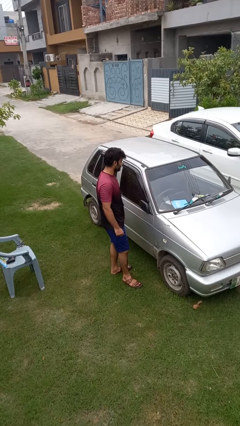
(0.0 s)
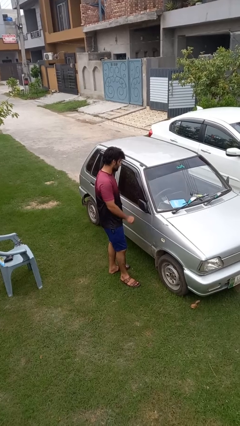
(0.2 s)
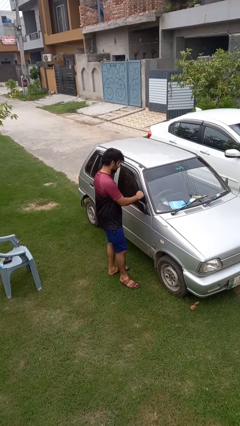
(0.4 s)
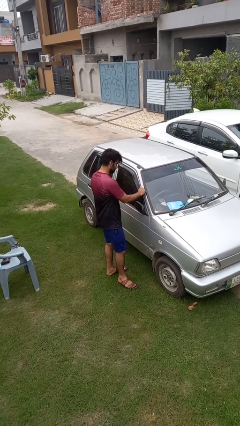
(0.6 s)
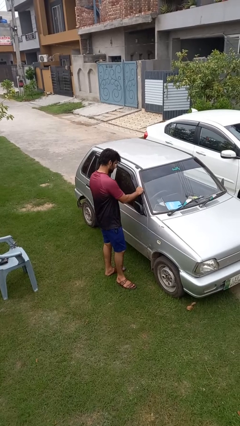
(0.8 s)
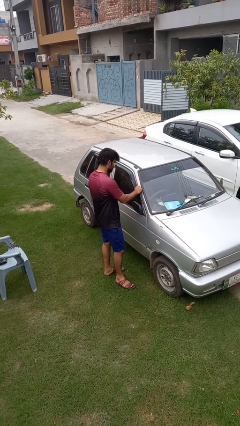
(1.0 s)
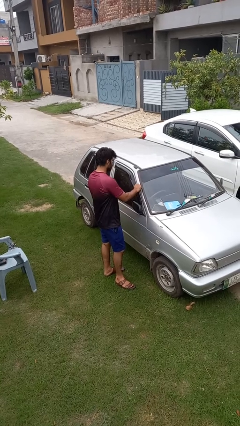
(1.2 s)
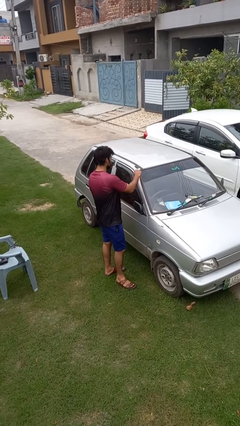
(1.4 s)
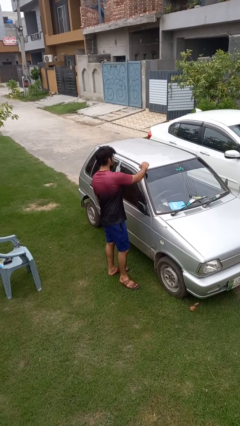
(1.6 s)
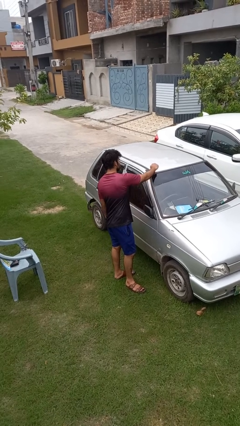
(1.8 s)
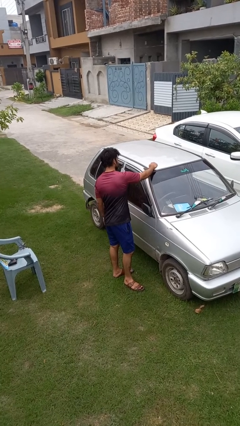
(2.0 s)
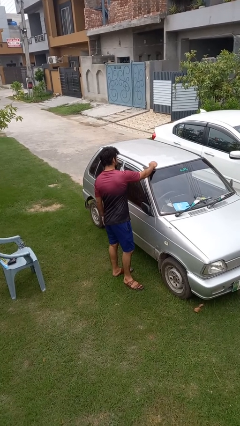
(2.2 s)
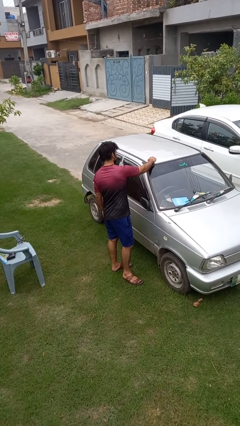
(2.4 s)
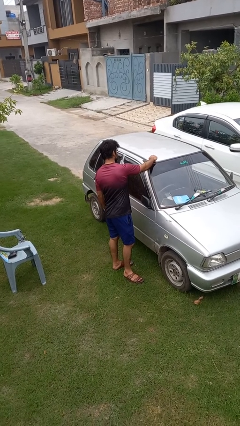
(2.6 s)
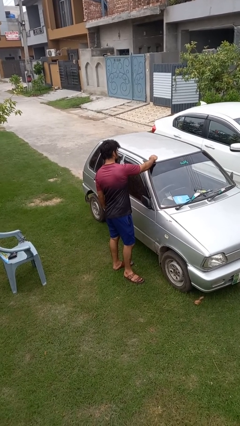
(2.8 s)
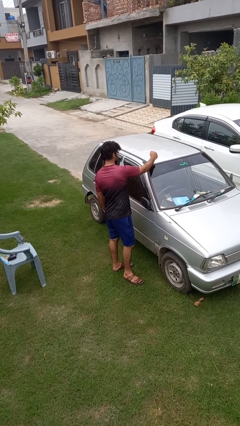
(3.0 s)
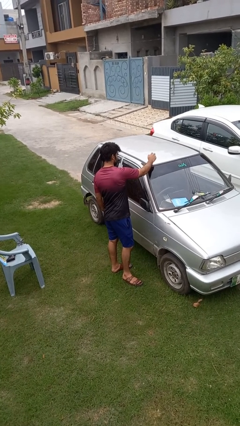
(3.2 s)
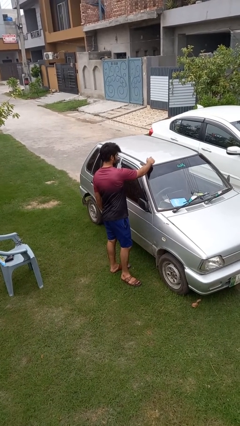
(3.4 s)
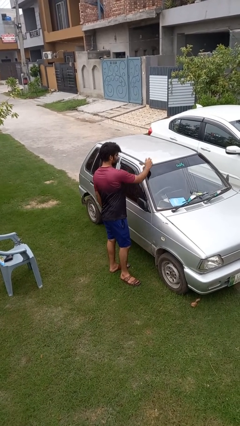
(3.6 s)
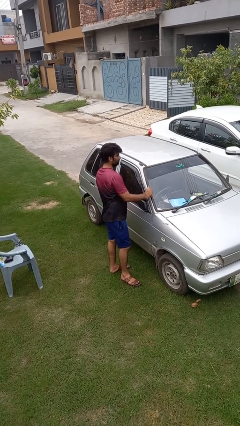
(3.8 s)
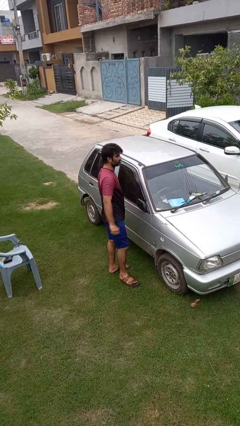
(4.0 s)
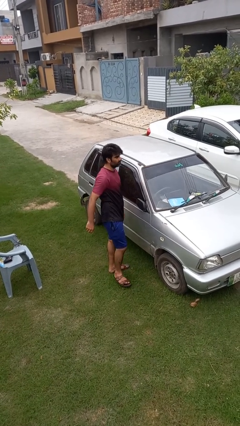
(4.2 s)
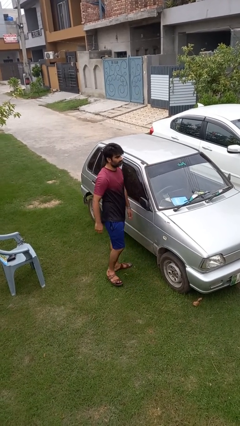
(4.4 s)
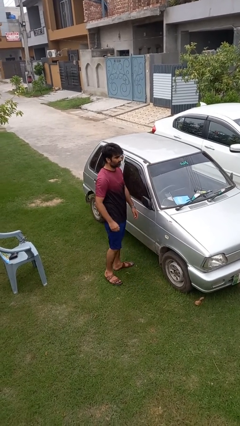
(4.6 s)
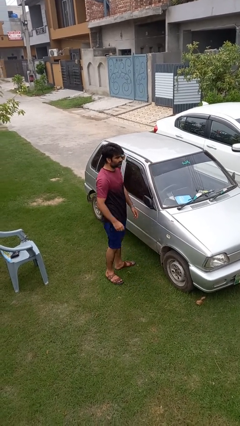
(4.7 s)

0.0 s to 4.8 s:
person taps object with finger

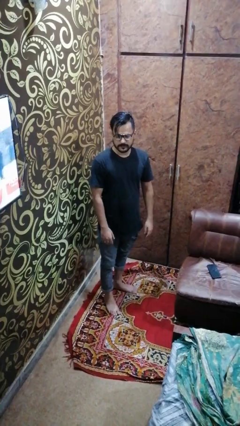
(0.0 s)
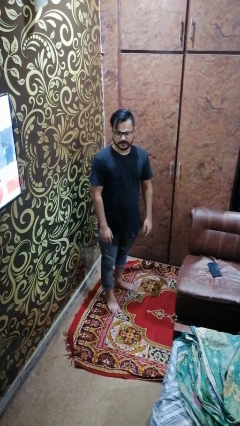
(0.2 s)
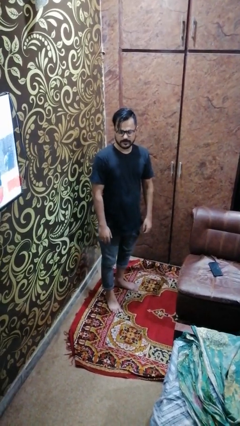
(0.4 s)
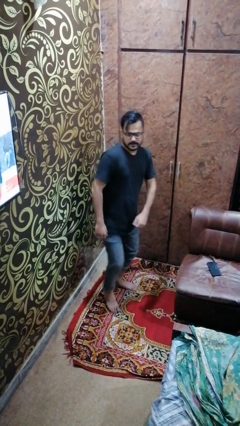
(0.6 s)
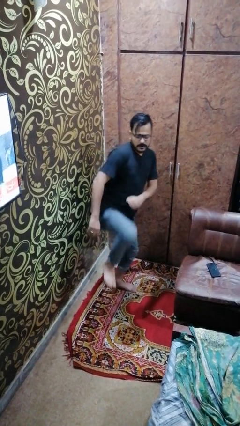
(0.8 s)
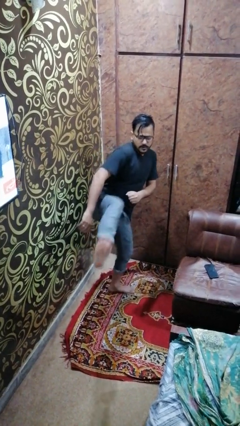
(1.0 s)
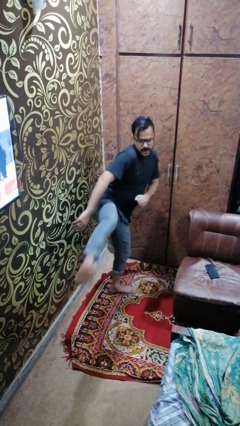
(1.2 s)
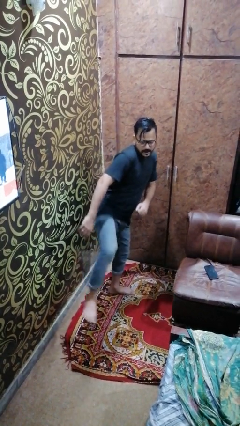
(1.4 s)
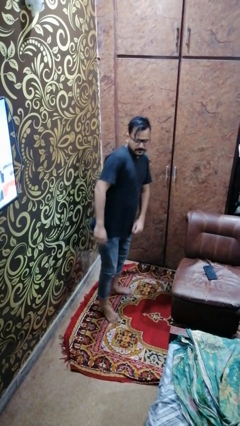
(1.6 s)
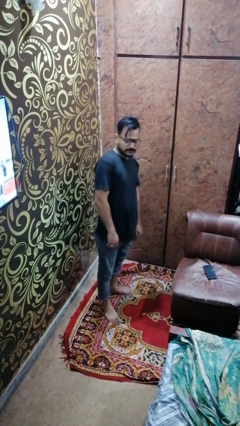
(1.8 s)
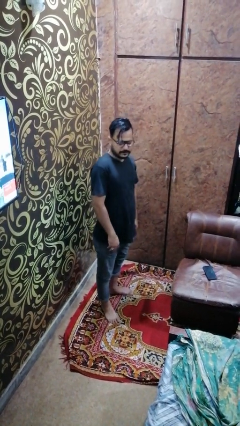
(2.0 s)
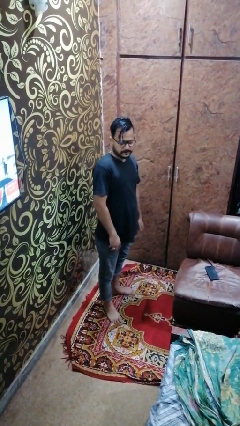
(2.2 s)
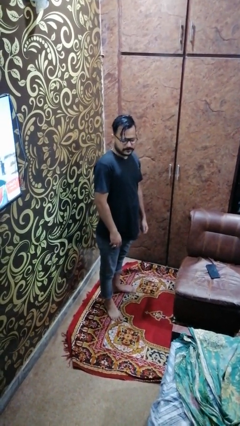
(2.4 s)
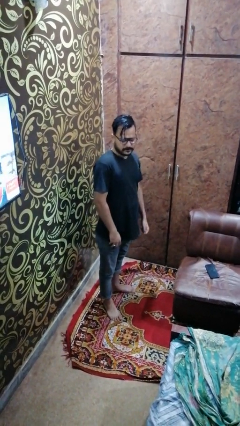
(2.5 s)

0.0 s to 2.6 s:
person karate kicks

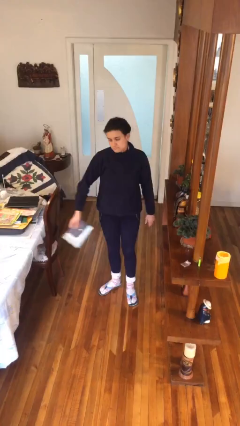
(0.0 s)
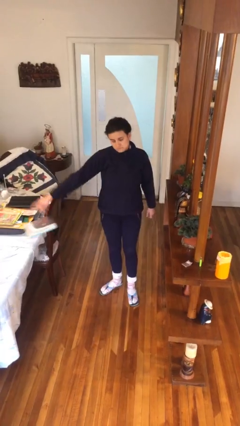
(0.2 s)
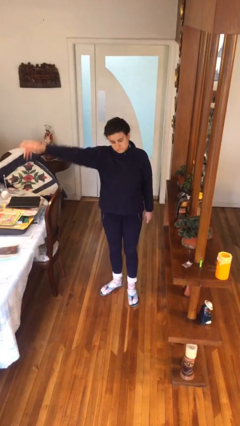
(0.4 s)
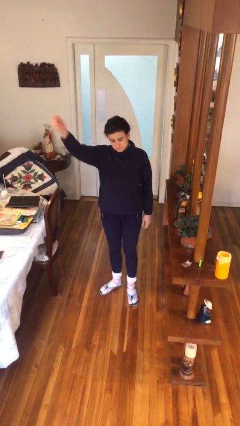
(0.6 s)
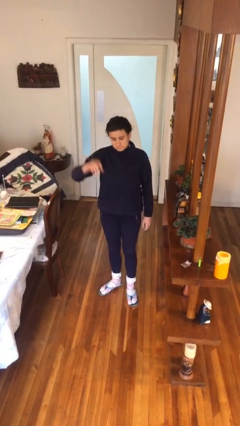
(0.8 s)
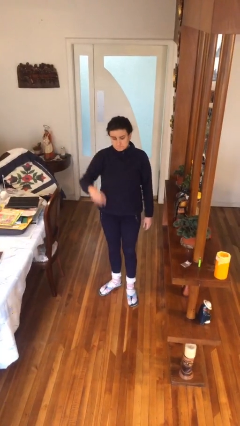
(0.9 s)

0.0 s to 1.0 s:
person throws object on table

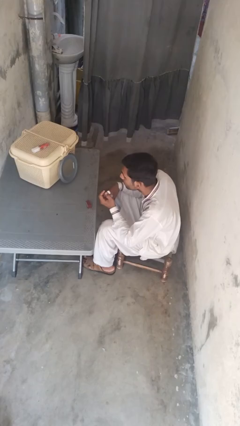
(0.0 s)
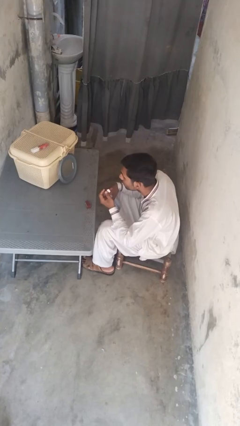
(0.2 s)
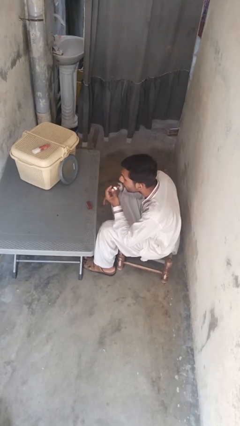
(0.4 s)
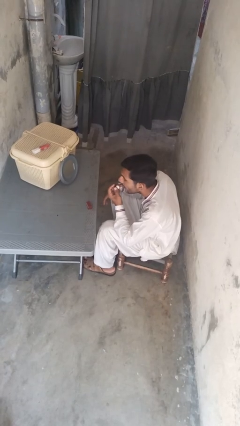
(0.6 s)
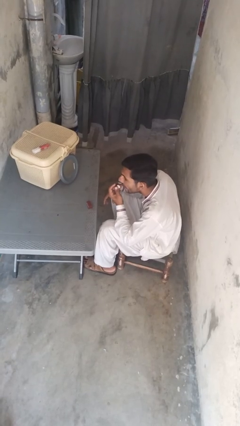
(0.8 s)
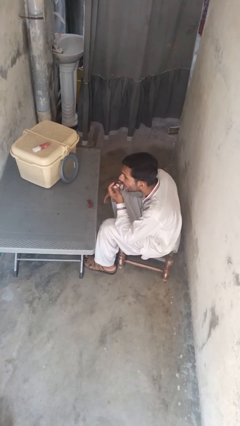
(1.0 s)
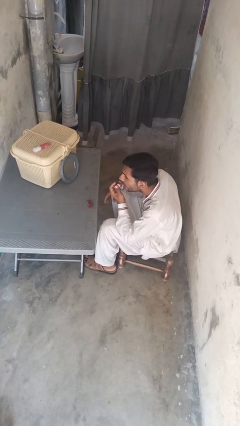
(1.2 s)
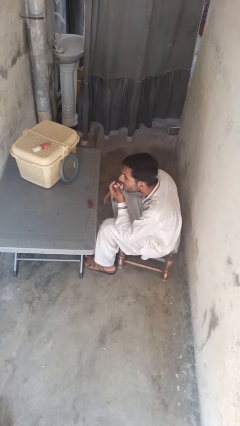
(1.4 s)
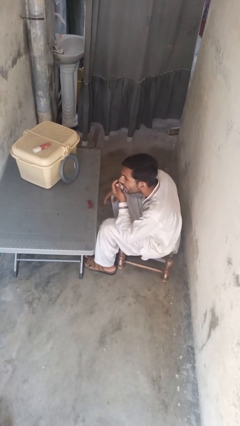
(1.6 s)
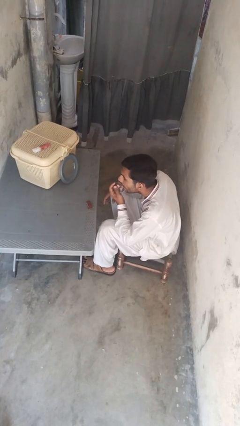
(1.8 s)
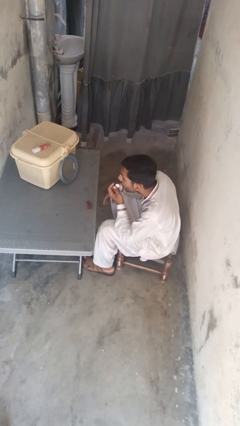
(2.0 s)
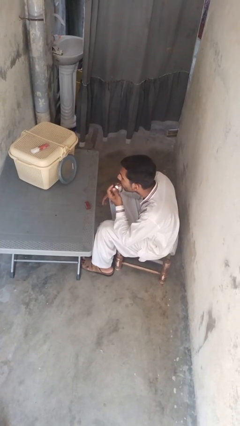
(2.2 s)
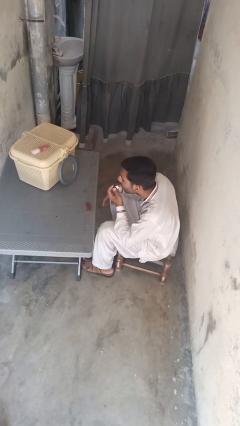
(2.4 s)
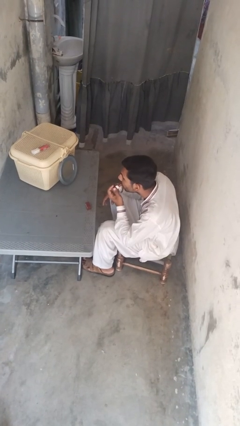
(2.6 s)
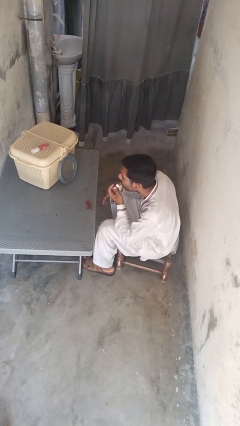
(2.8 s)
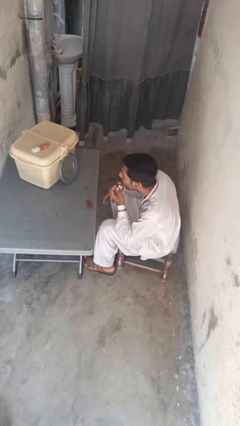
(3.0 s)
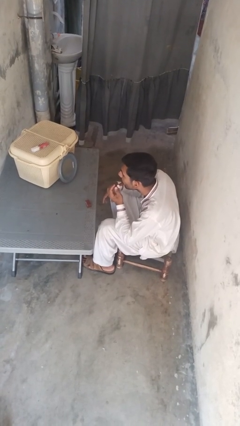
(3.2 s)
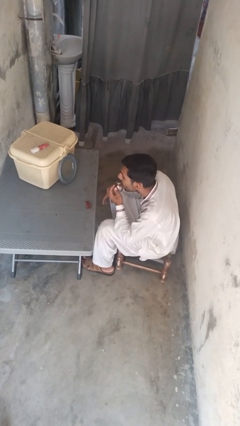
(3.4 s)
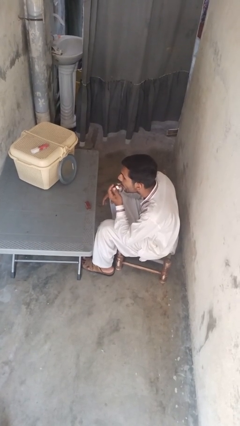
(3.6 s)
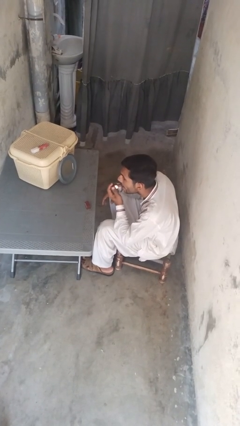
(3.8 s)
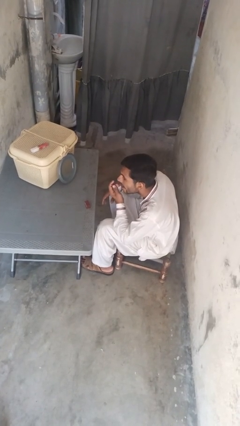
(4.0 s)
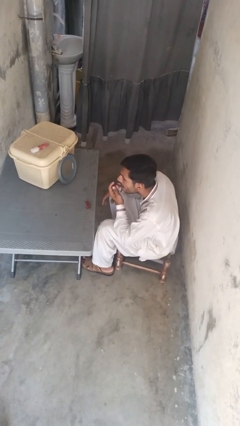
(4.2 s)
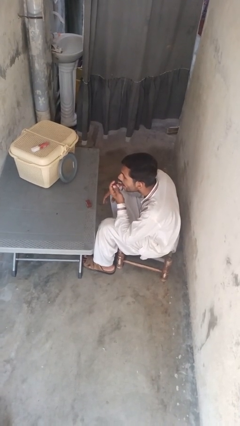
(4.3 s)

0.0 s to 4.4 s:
person applies lip makeup

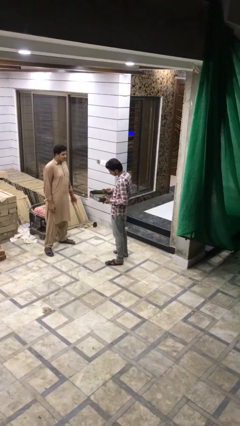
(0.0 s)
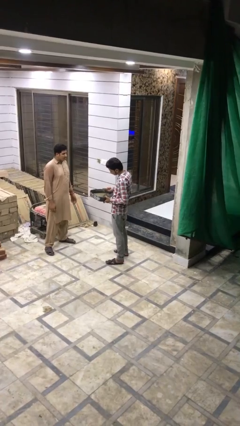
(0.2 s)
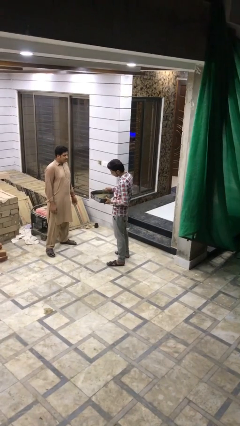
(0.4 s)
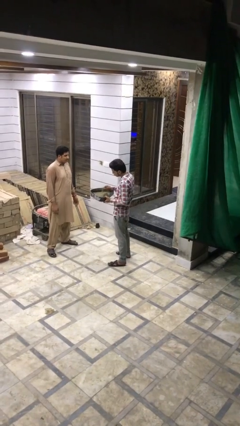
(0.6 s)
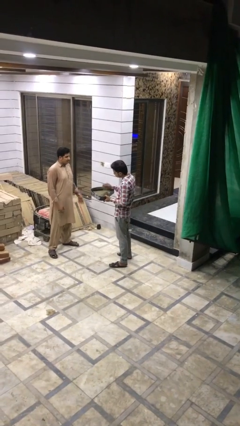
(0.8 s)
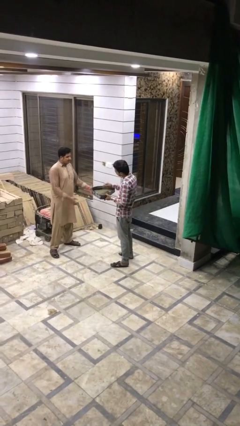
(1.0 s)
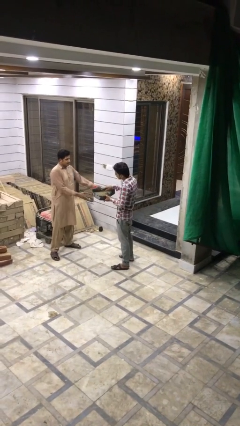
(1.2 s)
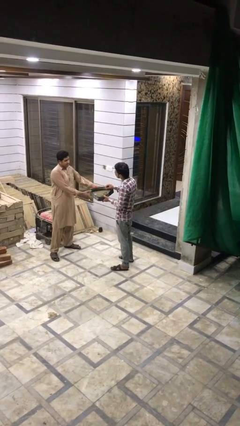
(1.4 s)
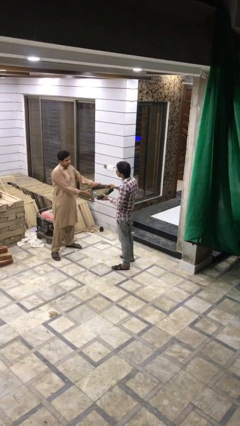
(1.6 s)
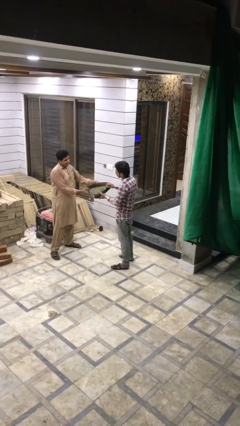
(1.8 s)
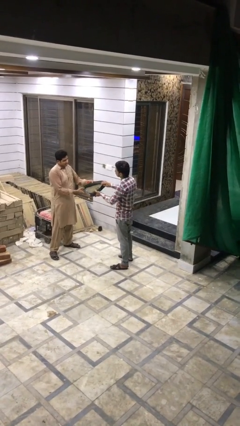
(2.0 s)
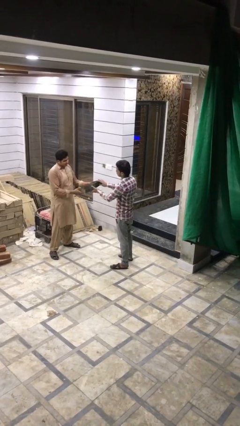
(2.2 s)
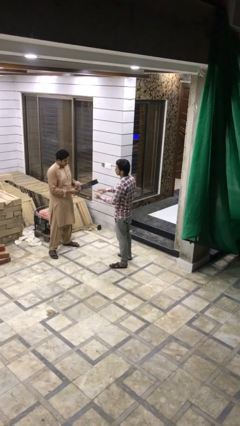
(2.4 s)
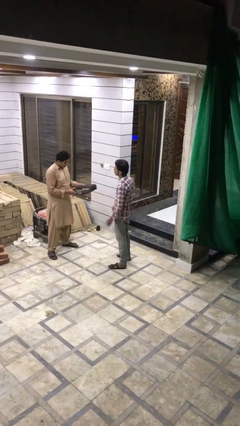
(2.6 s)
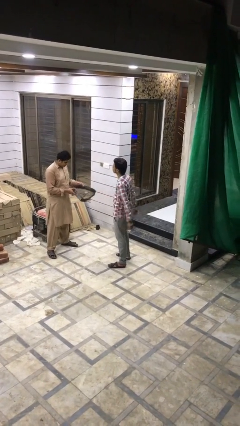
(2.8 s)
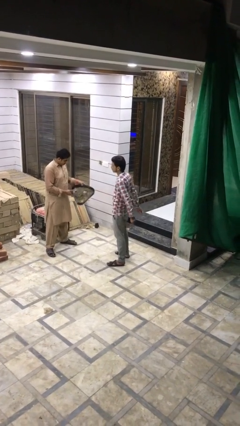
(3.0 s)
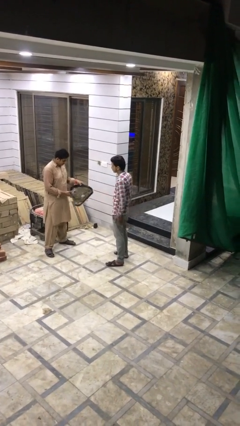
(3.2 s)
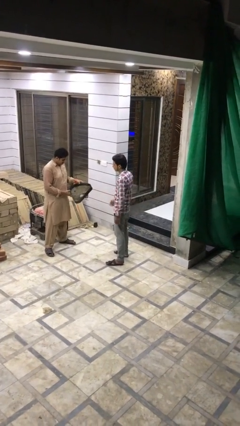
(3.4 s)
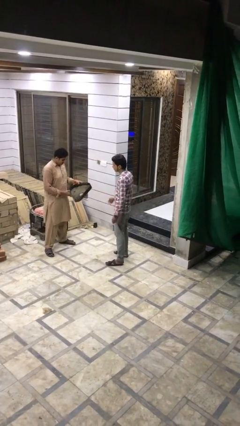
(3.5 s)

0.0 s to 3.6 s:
person transfers object to person

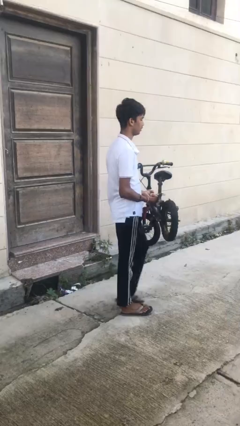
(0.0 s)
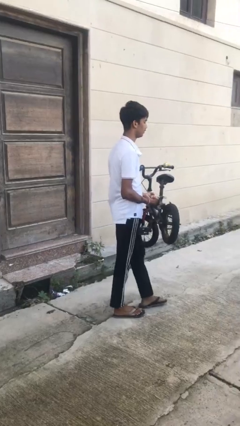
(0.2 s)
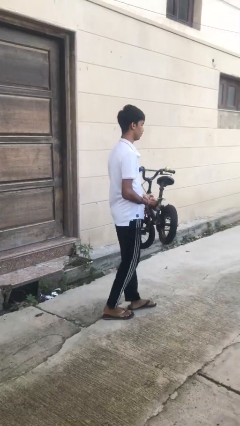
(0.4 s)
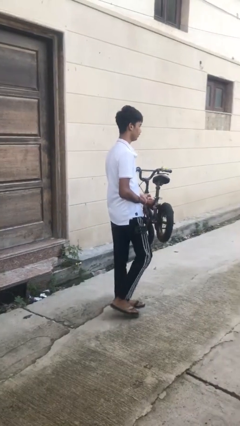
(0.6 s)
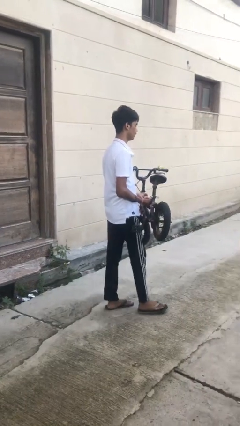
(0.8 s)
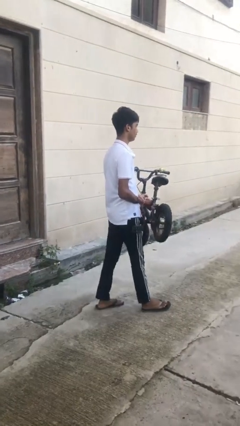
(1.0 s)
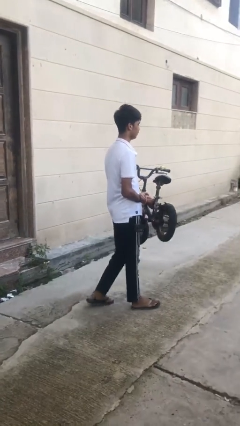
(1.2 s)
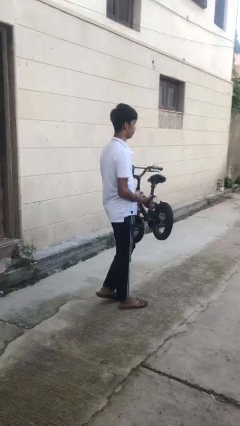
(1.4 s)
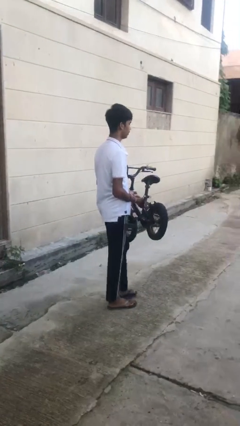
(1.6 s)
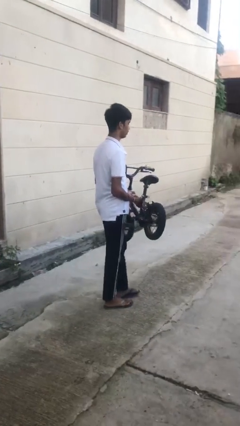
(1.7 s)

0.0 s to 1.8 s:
person carries bicycle
